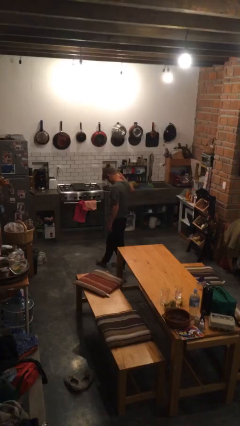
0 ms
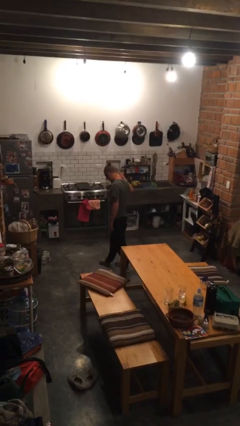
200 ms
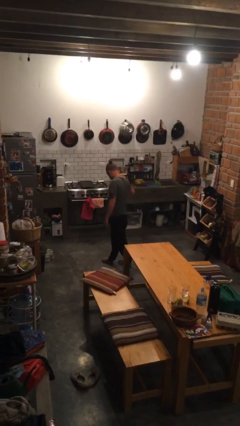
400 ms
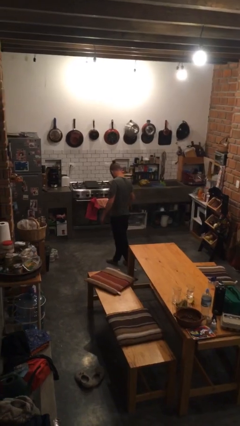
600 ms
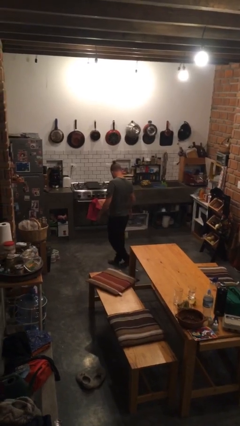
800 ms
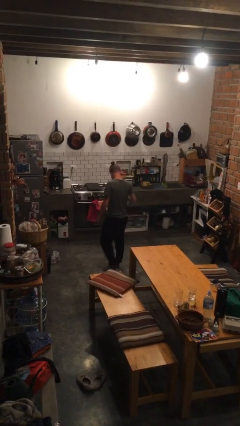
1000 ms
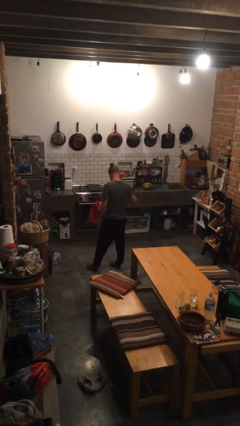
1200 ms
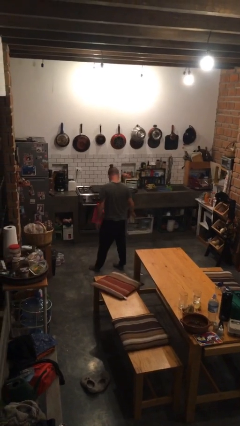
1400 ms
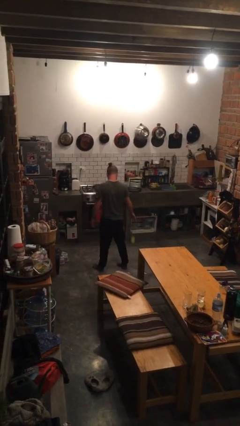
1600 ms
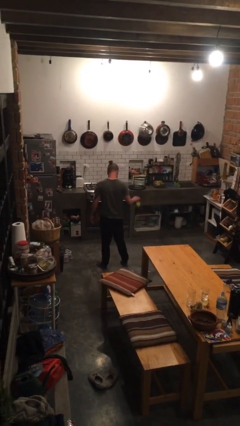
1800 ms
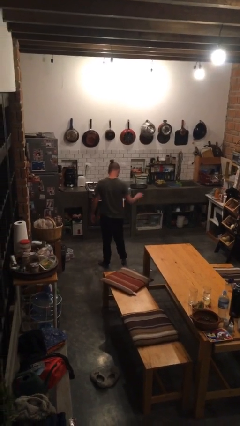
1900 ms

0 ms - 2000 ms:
person bounces ball on floor

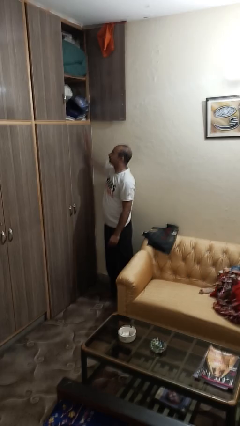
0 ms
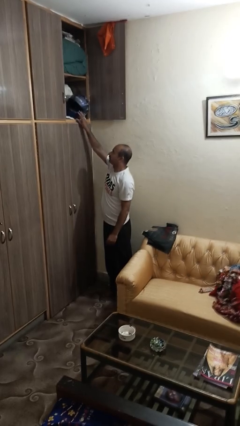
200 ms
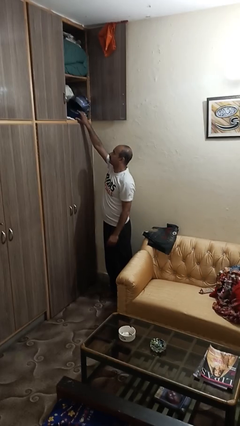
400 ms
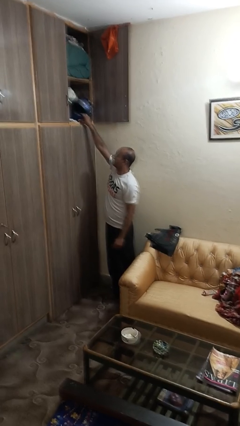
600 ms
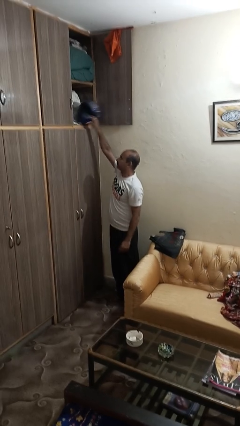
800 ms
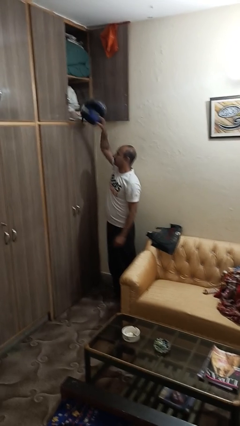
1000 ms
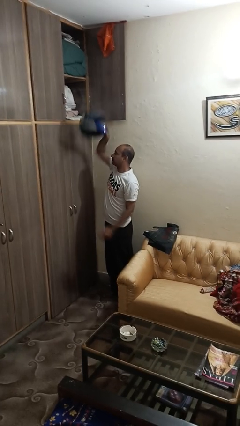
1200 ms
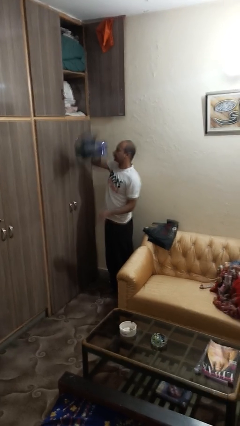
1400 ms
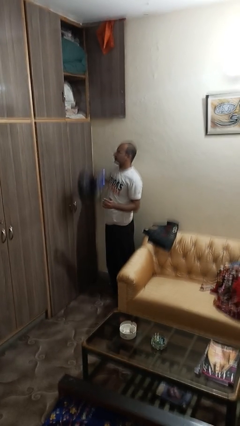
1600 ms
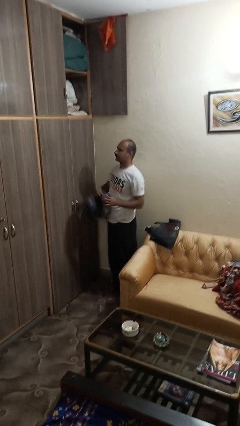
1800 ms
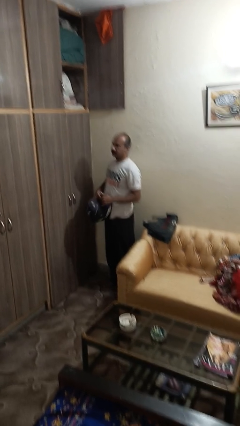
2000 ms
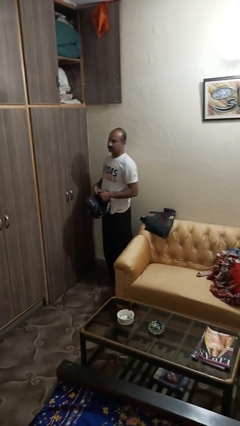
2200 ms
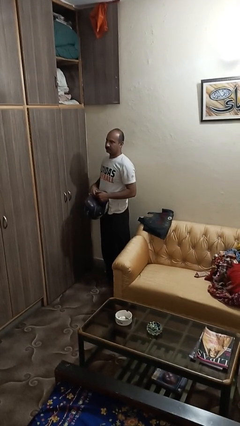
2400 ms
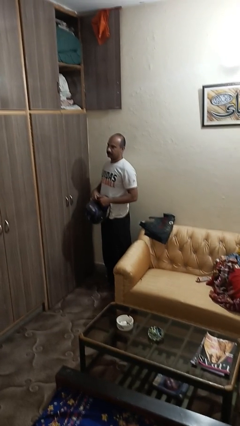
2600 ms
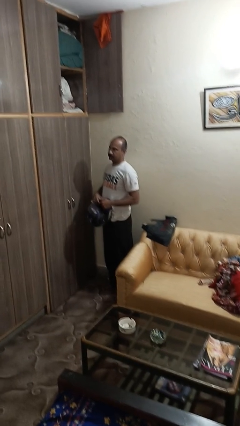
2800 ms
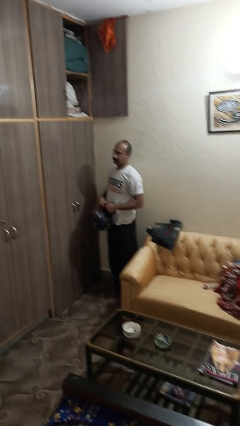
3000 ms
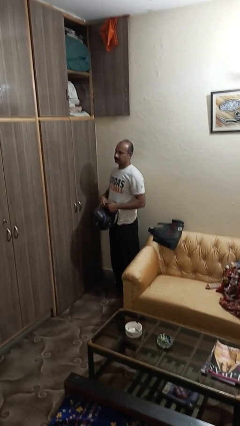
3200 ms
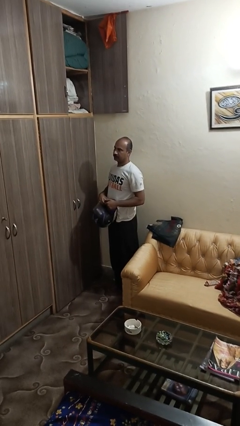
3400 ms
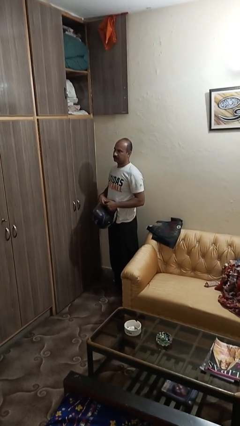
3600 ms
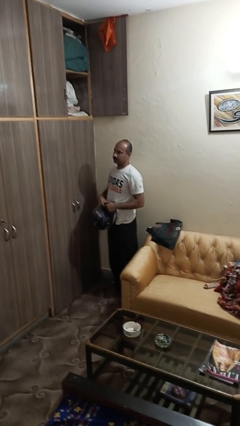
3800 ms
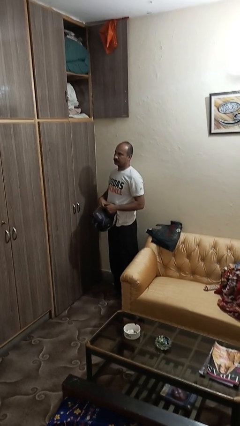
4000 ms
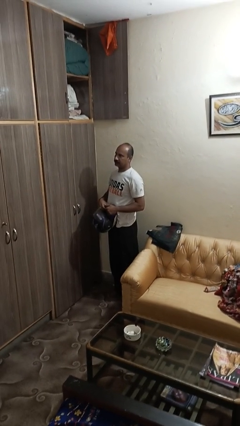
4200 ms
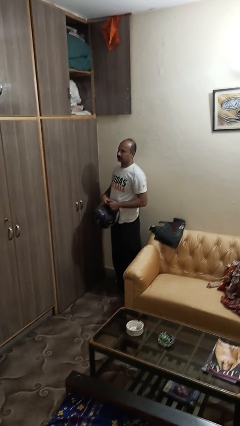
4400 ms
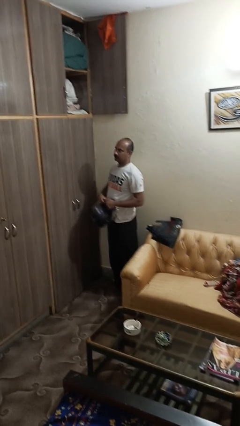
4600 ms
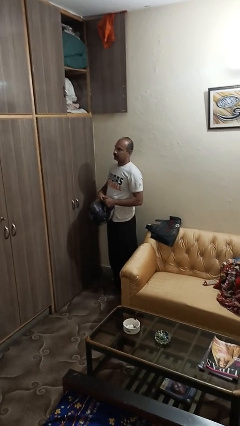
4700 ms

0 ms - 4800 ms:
person picks up object from shelf

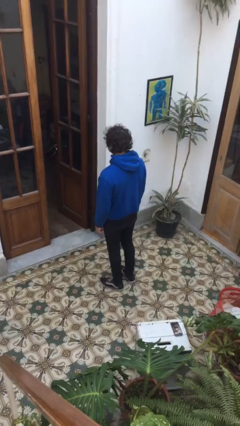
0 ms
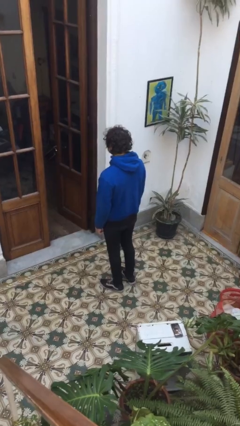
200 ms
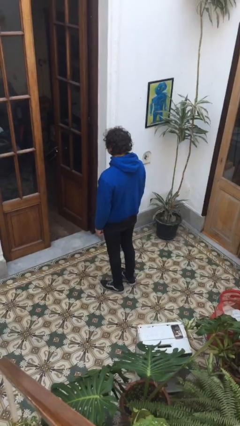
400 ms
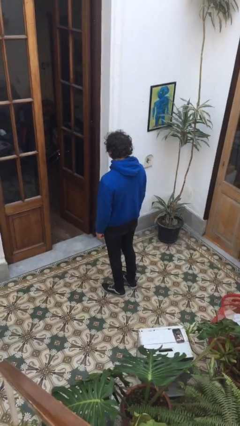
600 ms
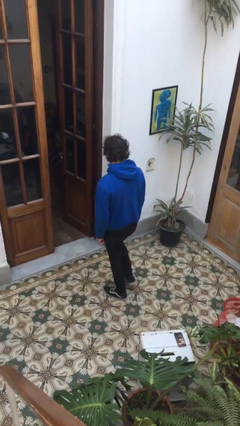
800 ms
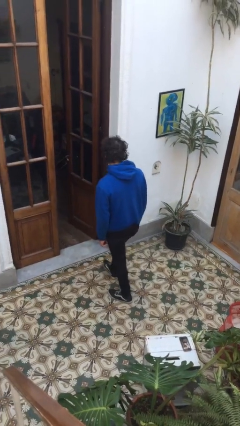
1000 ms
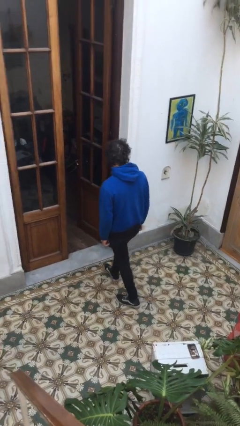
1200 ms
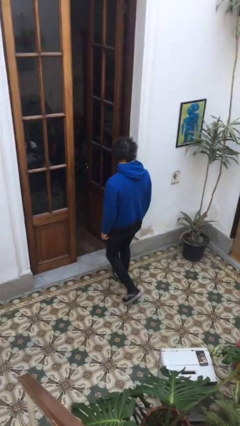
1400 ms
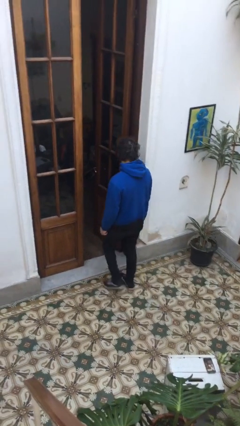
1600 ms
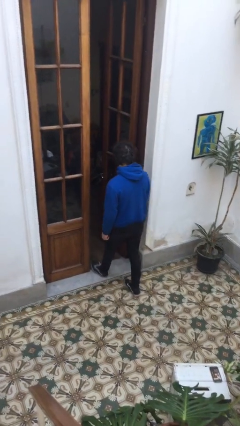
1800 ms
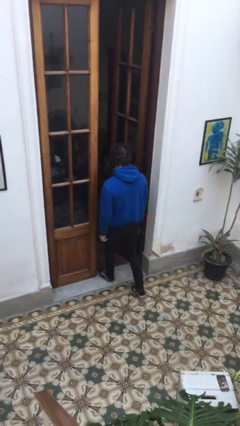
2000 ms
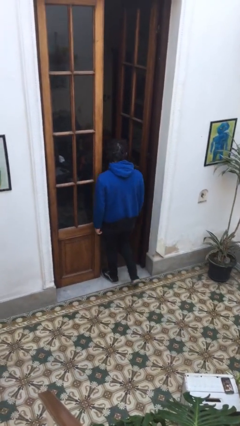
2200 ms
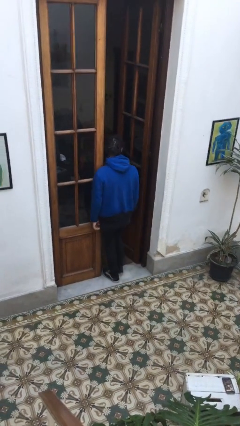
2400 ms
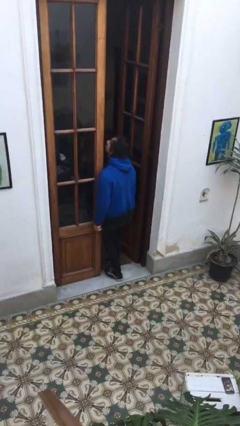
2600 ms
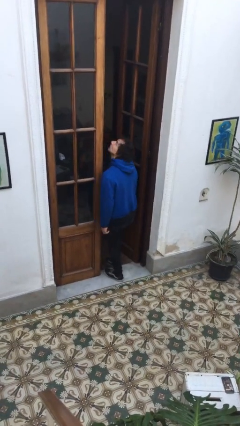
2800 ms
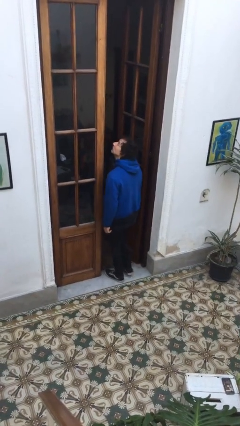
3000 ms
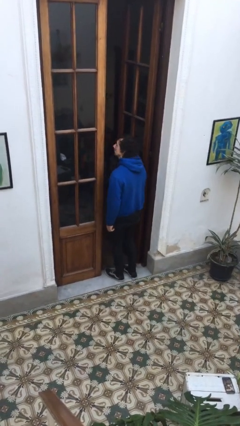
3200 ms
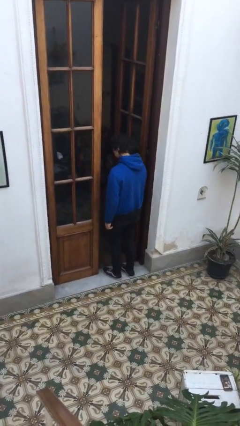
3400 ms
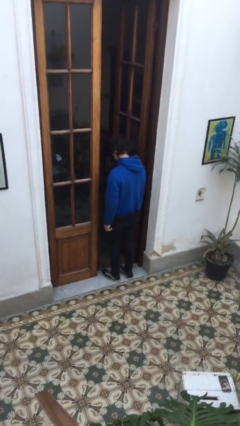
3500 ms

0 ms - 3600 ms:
person bumps into wall

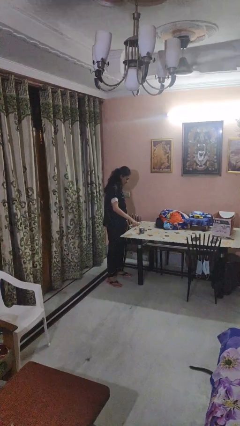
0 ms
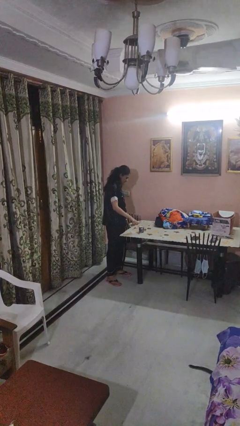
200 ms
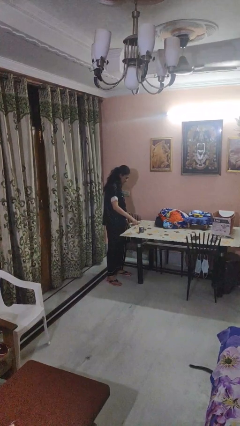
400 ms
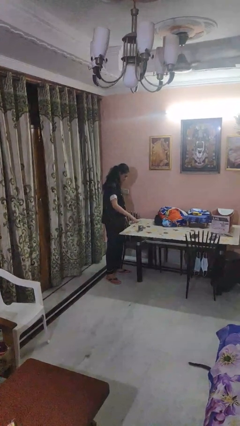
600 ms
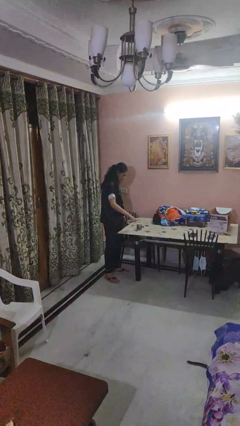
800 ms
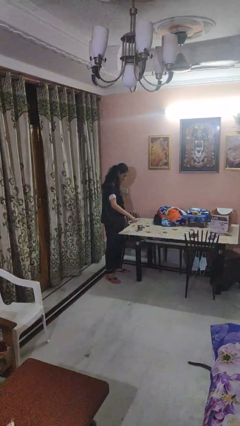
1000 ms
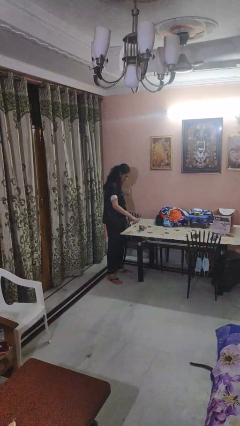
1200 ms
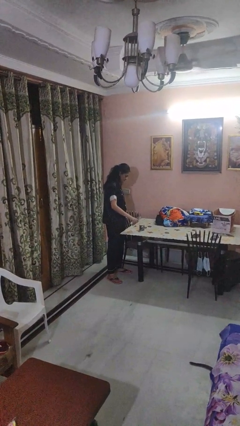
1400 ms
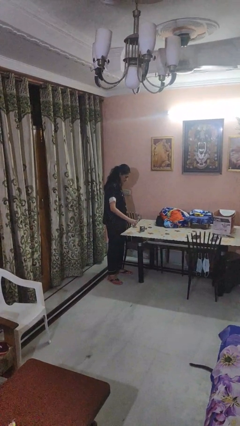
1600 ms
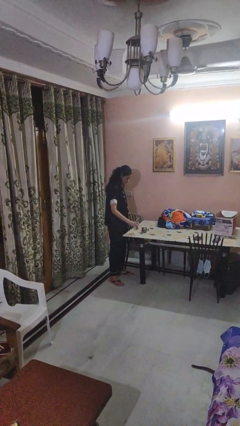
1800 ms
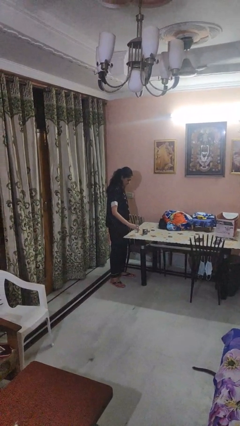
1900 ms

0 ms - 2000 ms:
person pours liquid into cup

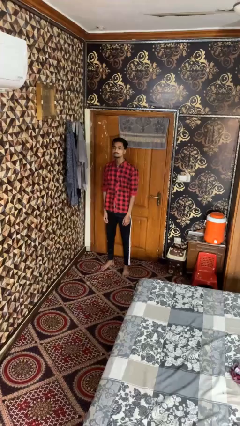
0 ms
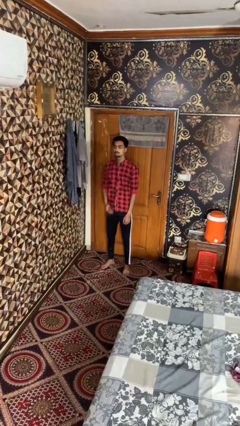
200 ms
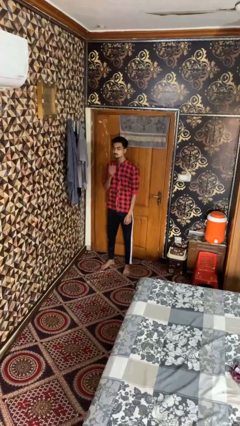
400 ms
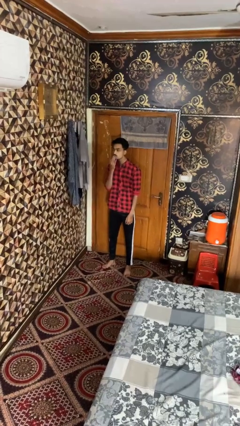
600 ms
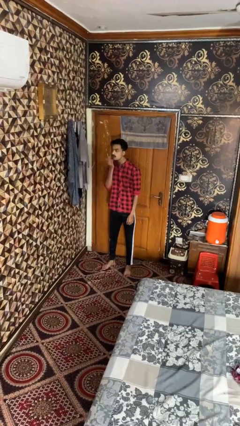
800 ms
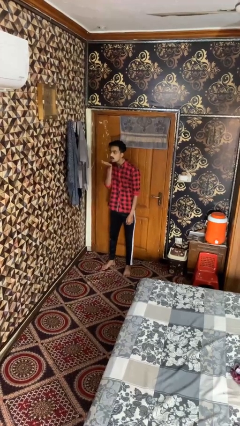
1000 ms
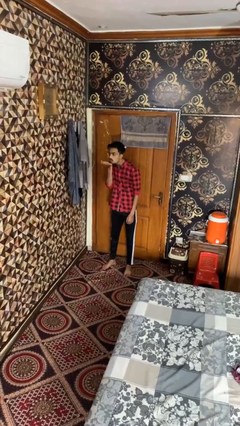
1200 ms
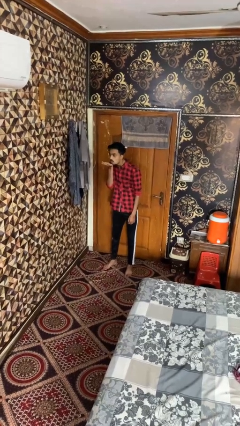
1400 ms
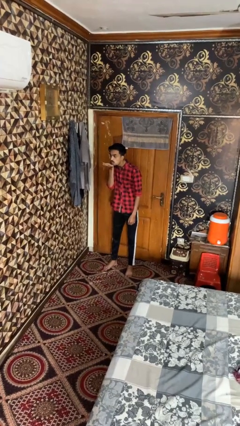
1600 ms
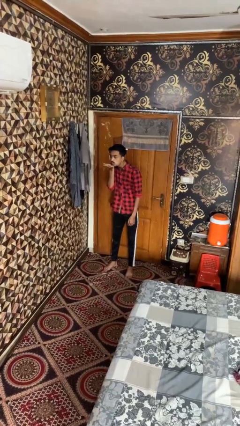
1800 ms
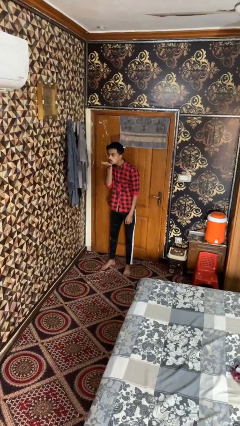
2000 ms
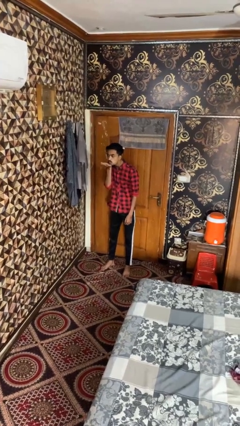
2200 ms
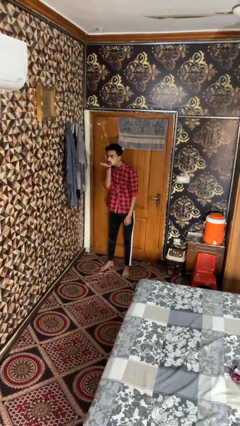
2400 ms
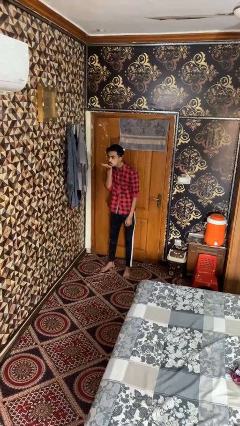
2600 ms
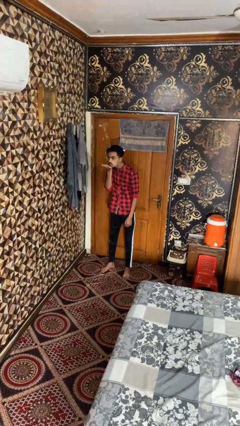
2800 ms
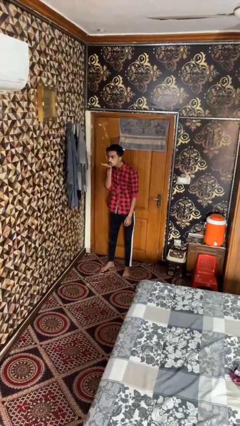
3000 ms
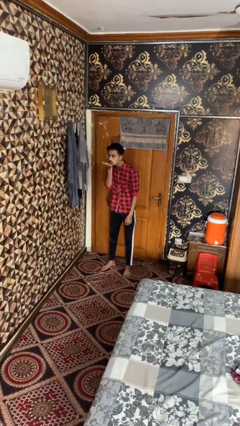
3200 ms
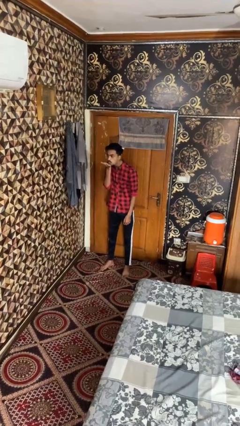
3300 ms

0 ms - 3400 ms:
person gestures blow kiss

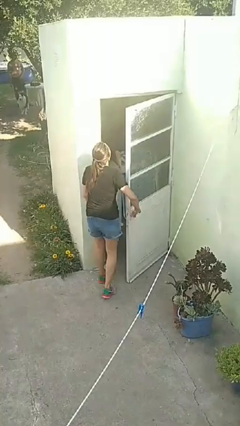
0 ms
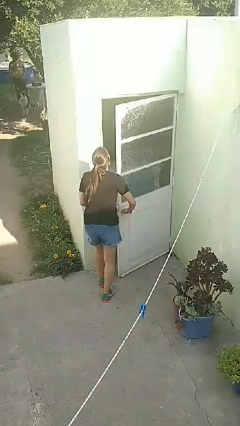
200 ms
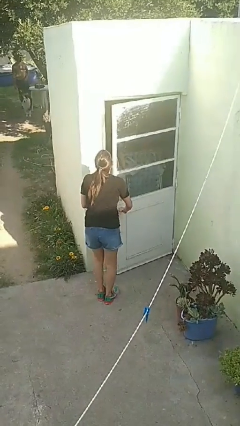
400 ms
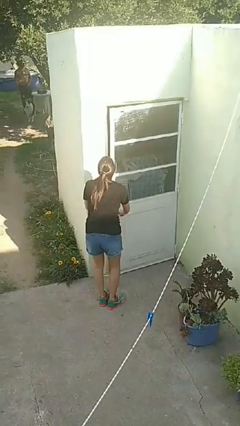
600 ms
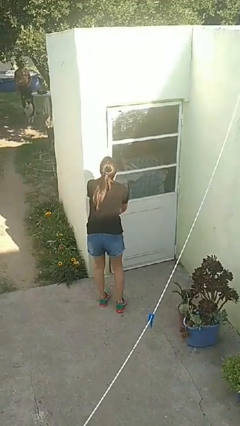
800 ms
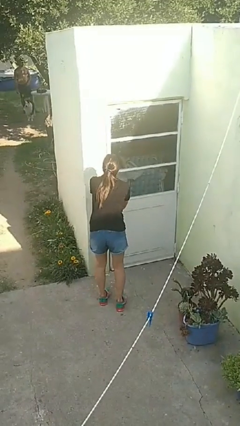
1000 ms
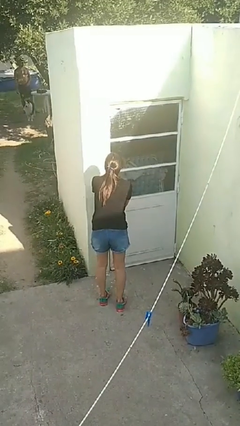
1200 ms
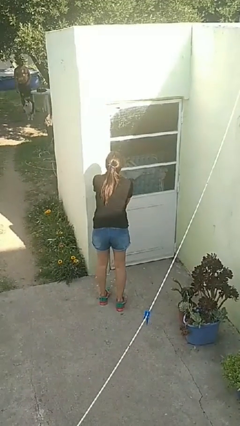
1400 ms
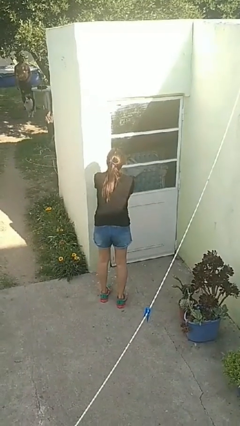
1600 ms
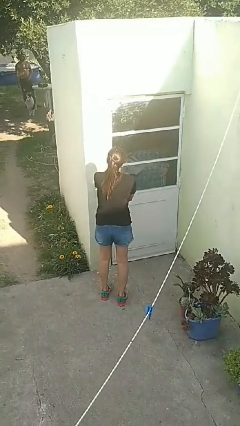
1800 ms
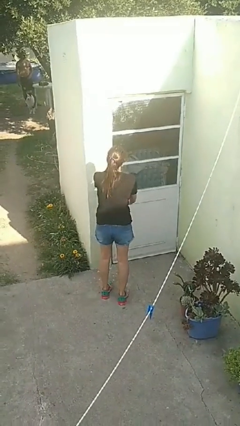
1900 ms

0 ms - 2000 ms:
person closes facility door
